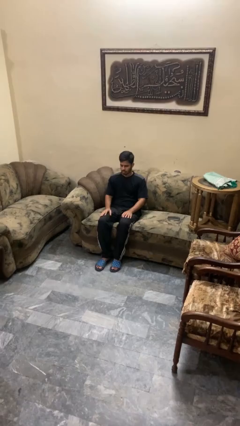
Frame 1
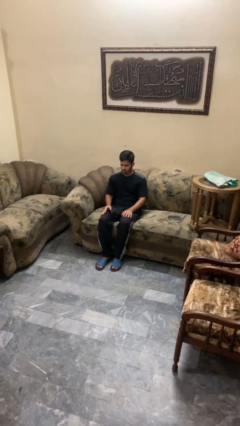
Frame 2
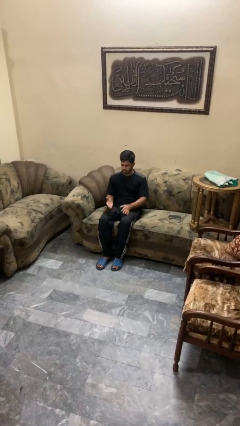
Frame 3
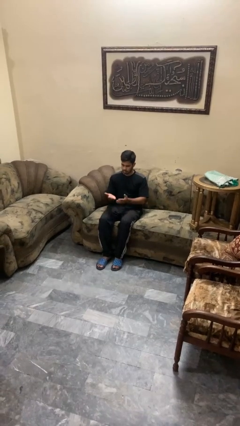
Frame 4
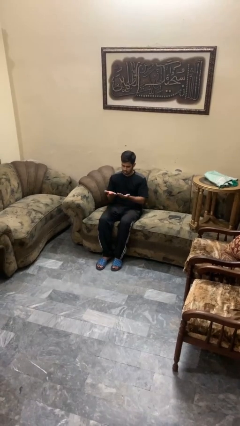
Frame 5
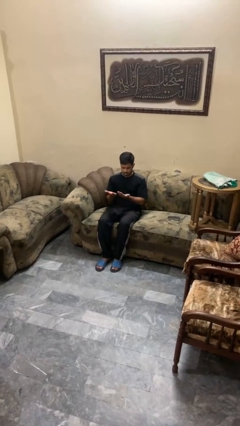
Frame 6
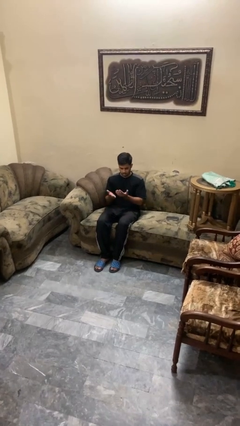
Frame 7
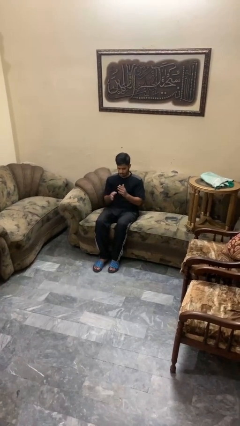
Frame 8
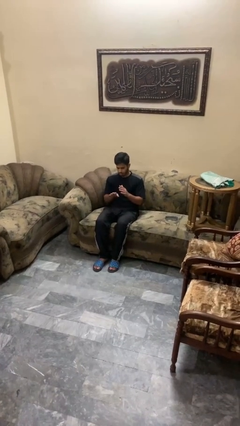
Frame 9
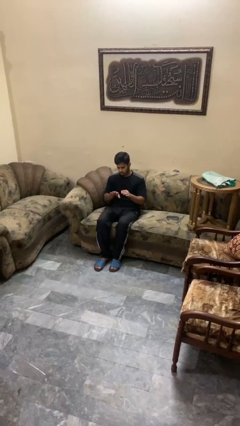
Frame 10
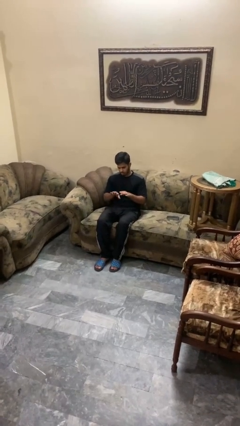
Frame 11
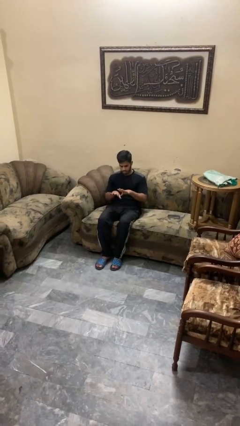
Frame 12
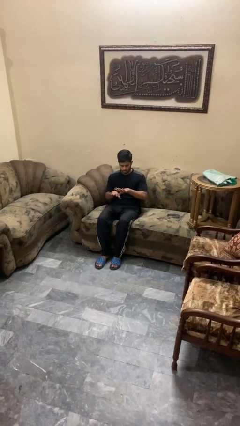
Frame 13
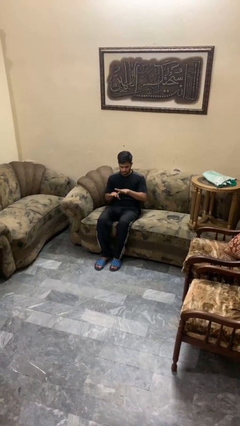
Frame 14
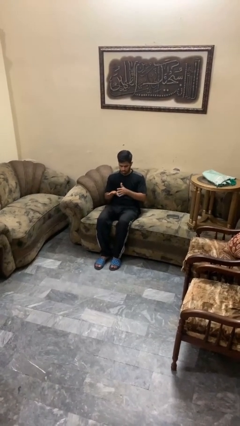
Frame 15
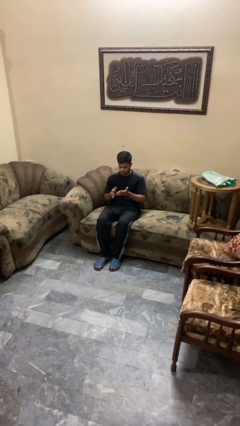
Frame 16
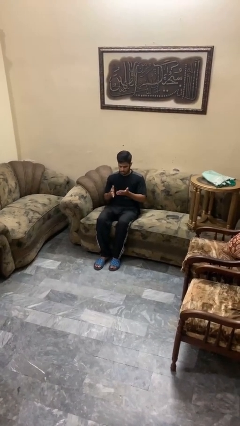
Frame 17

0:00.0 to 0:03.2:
person looks at hands in lap

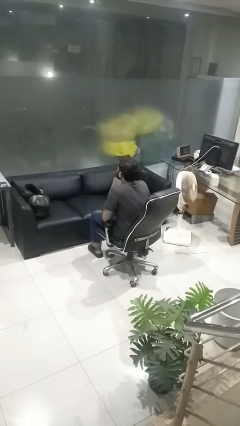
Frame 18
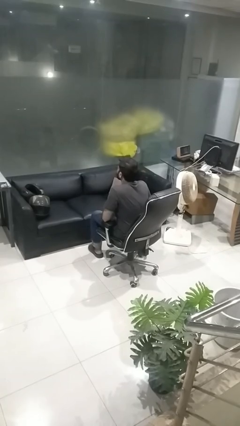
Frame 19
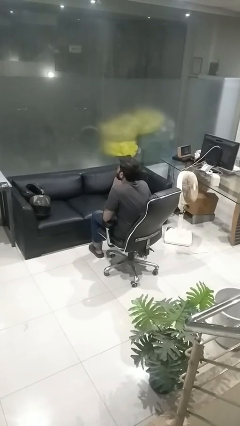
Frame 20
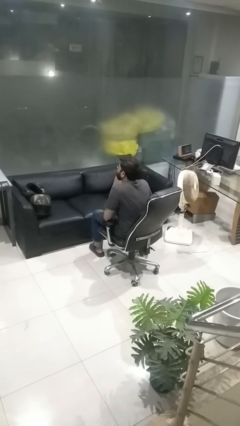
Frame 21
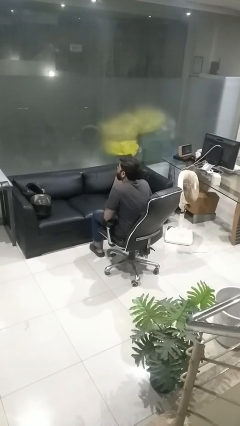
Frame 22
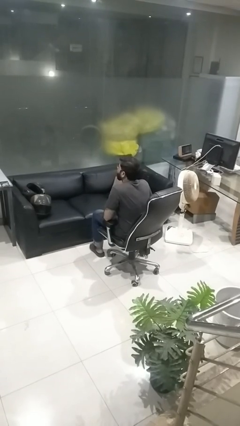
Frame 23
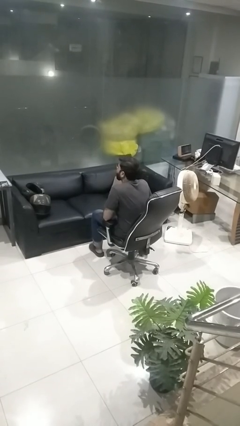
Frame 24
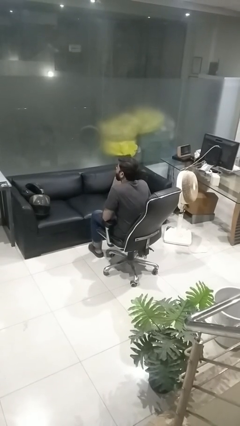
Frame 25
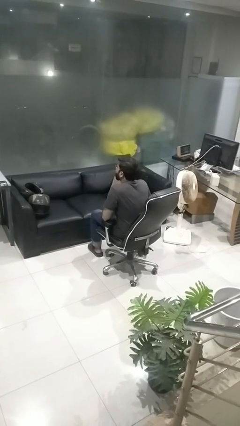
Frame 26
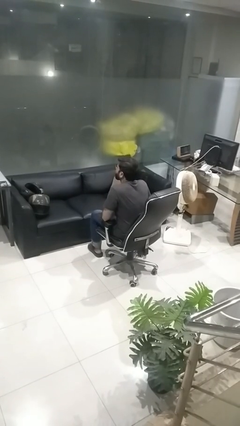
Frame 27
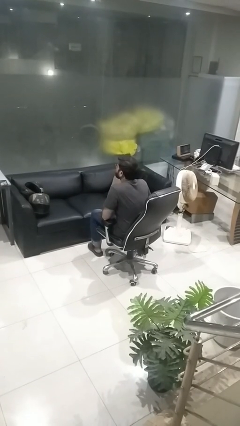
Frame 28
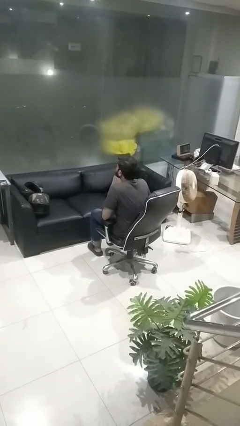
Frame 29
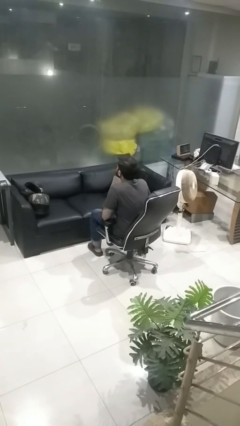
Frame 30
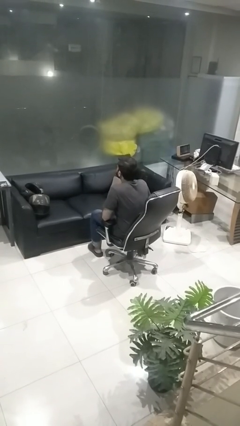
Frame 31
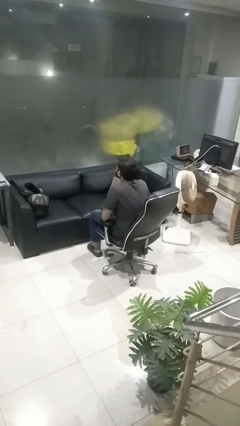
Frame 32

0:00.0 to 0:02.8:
person sticks out tongue

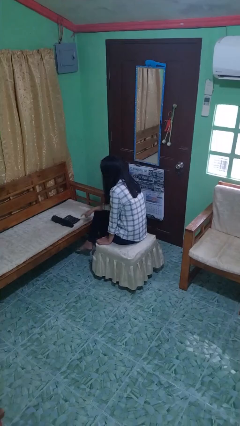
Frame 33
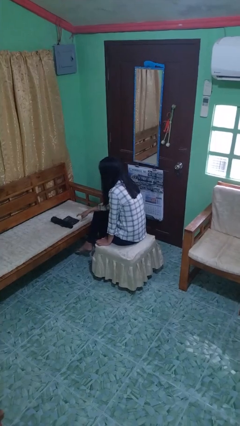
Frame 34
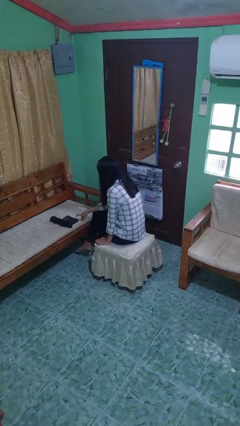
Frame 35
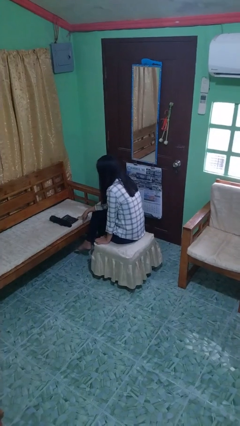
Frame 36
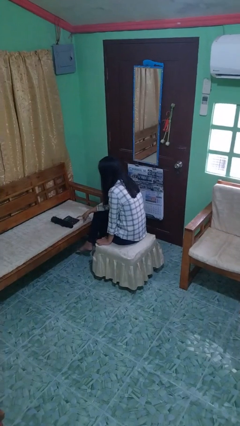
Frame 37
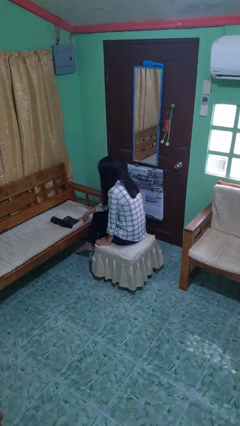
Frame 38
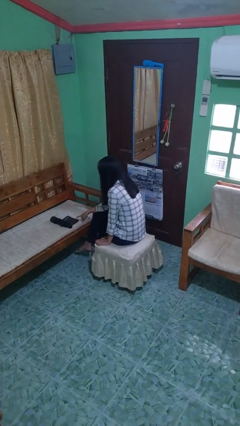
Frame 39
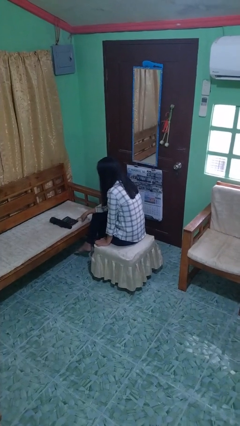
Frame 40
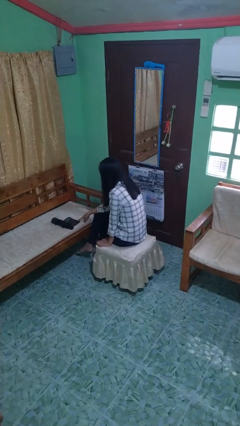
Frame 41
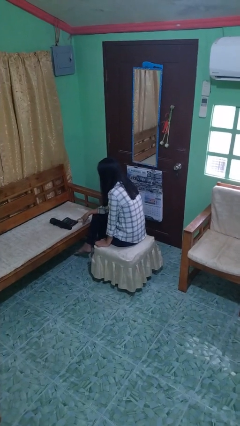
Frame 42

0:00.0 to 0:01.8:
person taps object with finger

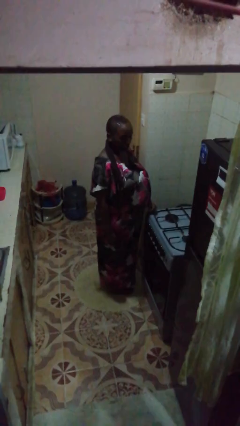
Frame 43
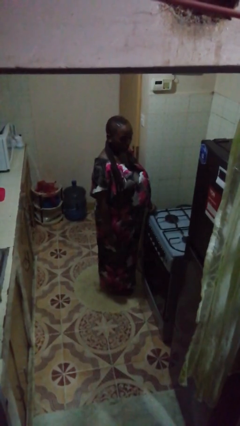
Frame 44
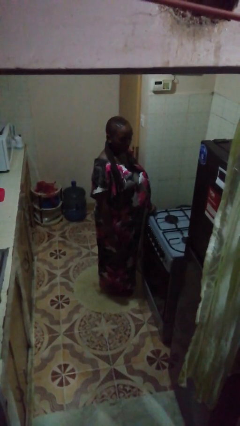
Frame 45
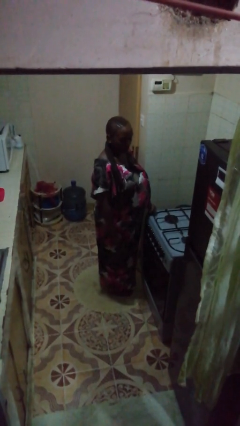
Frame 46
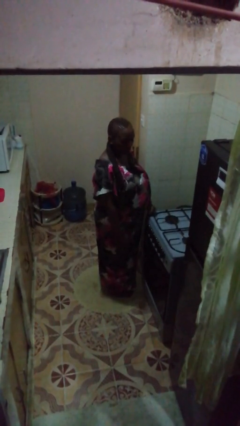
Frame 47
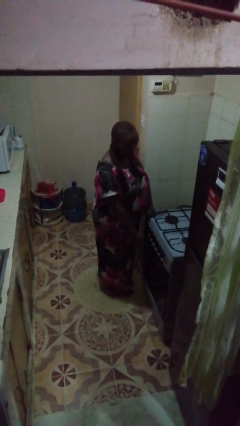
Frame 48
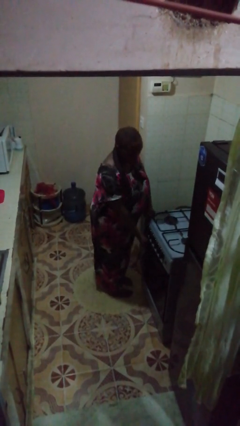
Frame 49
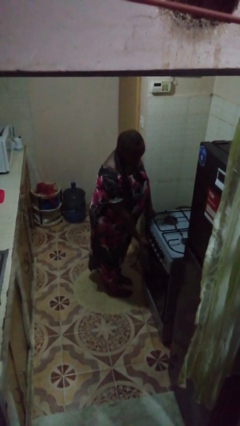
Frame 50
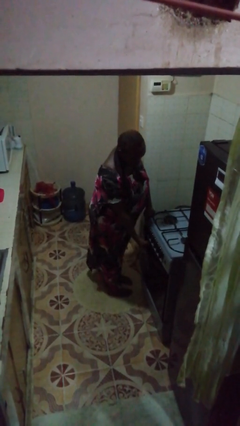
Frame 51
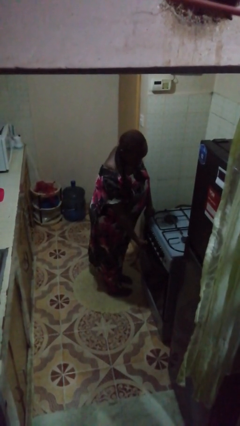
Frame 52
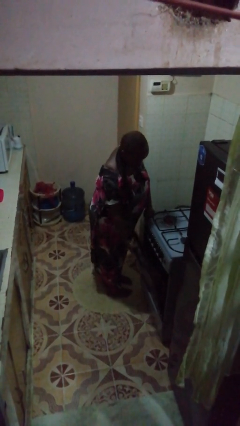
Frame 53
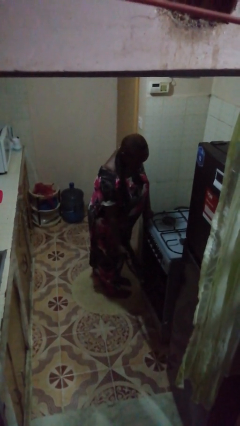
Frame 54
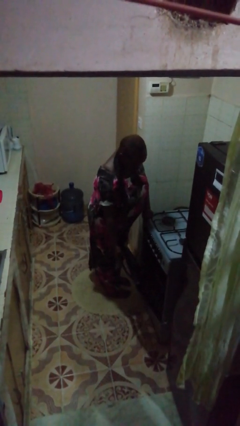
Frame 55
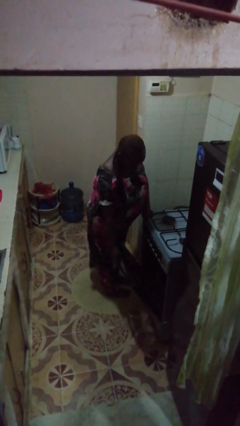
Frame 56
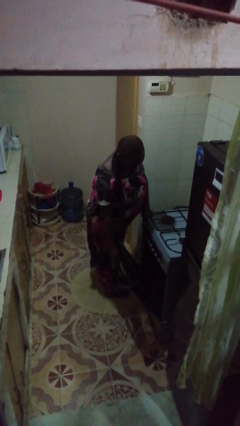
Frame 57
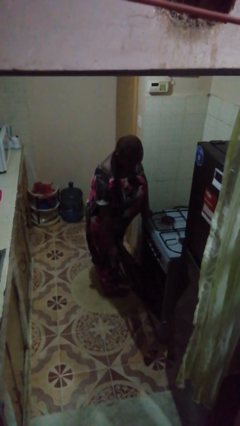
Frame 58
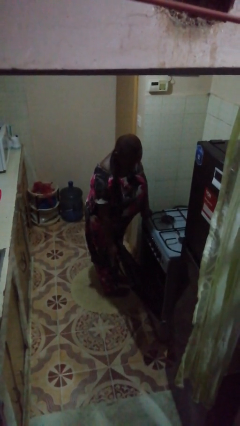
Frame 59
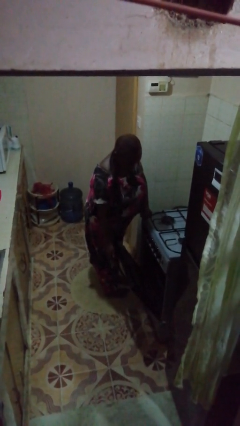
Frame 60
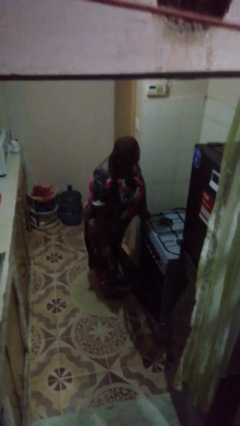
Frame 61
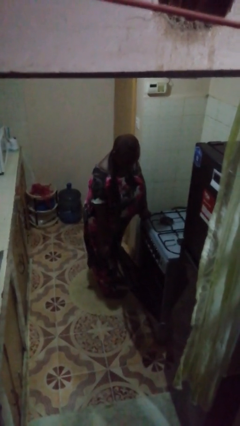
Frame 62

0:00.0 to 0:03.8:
person opens oven door

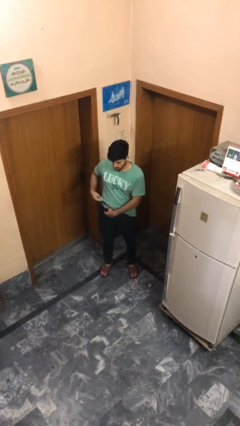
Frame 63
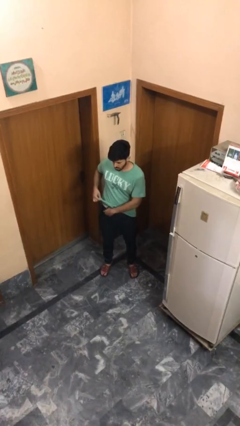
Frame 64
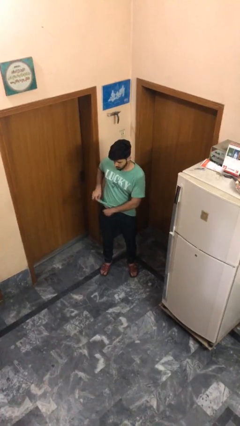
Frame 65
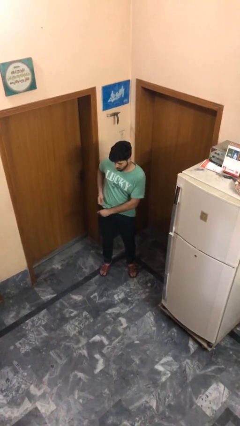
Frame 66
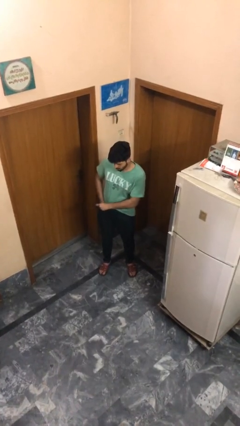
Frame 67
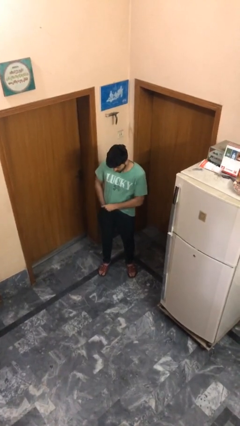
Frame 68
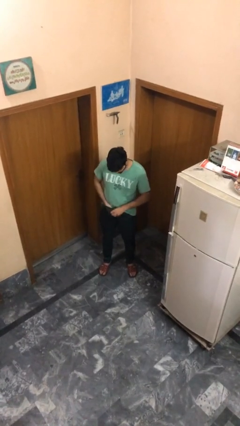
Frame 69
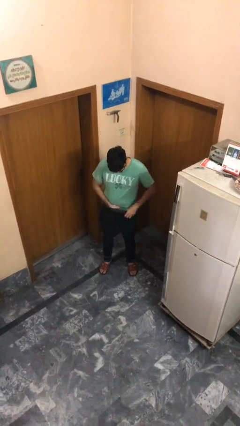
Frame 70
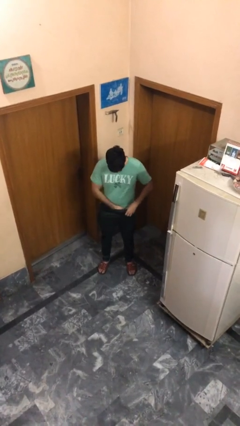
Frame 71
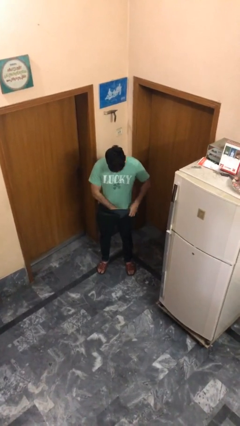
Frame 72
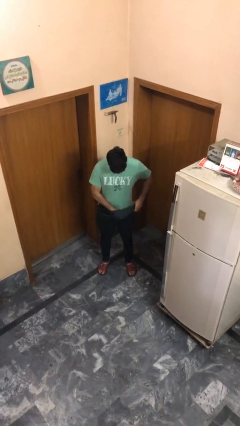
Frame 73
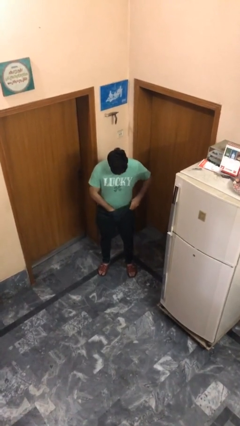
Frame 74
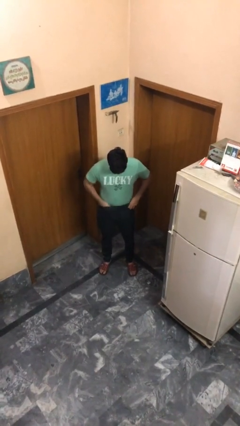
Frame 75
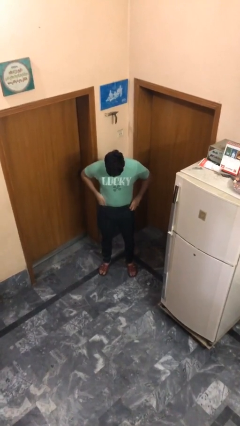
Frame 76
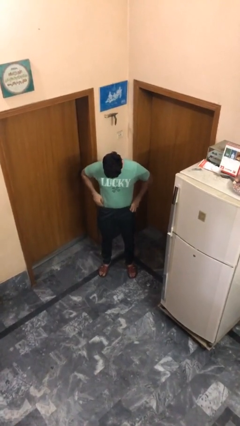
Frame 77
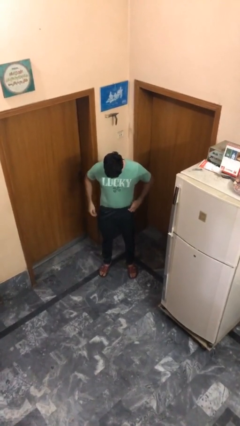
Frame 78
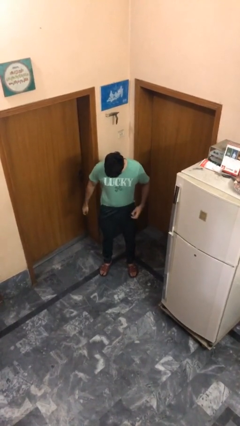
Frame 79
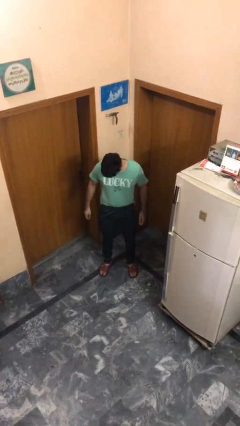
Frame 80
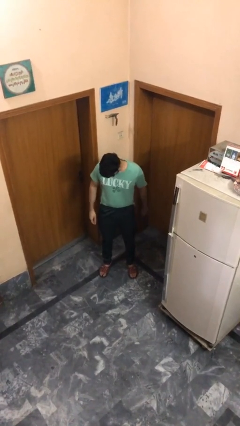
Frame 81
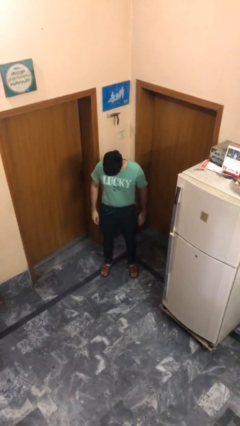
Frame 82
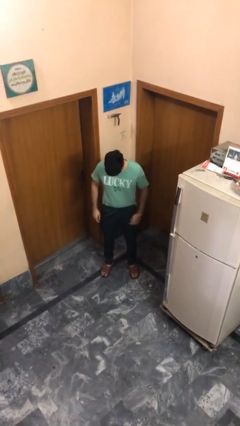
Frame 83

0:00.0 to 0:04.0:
person tucks in shirt

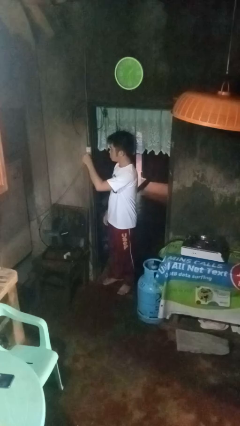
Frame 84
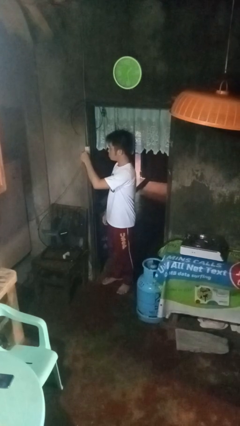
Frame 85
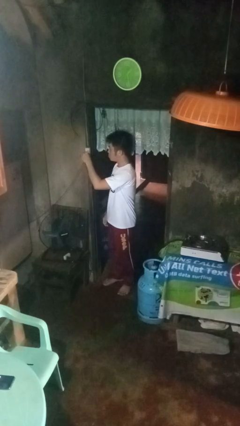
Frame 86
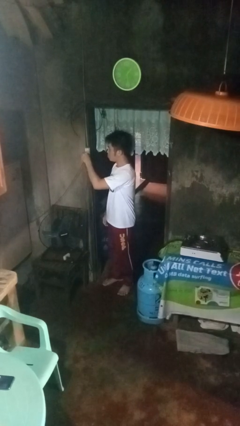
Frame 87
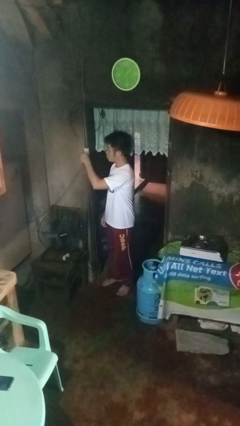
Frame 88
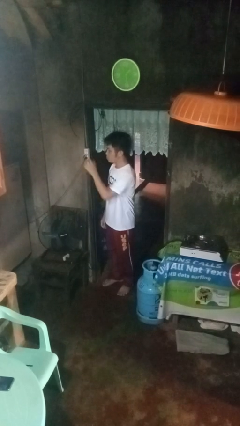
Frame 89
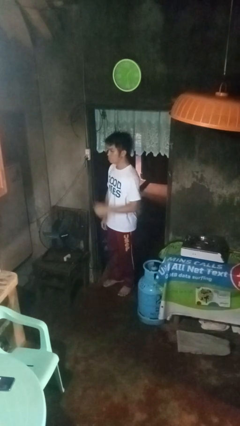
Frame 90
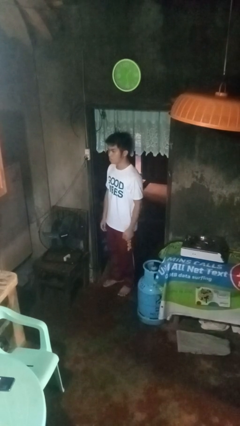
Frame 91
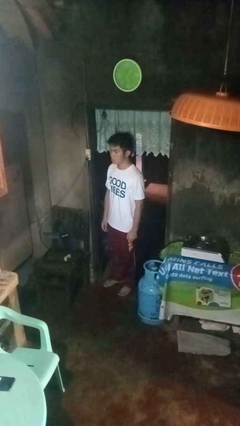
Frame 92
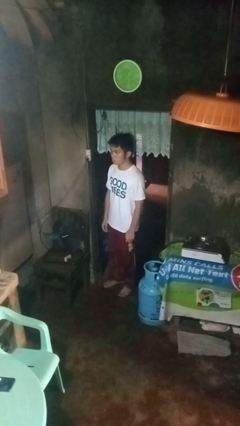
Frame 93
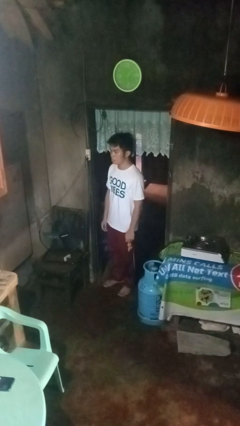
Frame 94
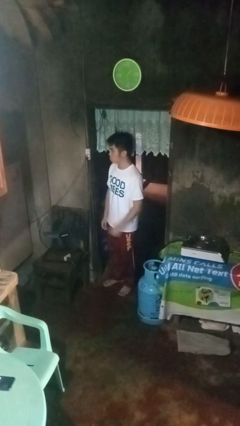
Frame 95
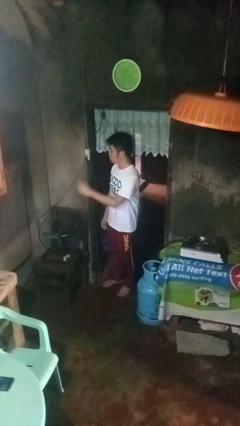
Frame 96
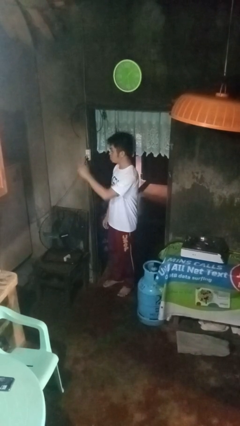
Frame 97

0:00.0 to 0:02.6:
person plugs into electrical socket
